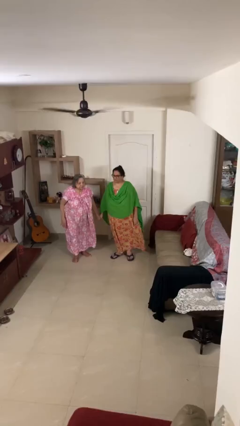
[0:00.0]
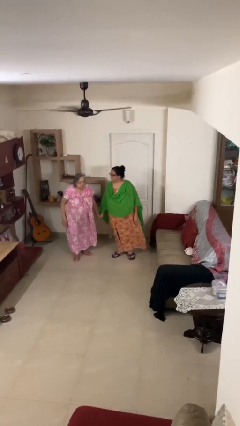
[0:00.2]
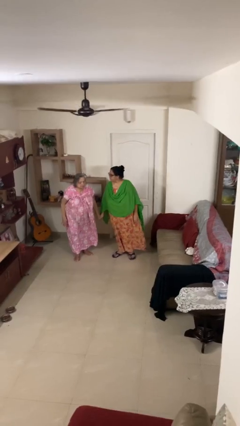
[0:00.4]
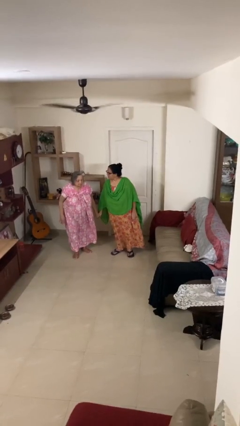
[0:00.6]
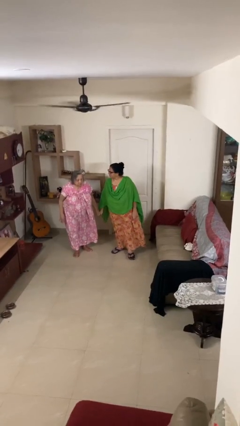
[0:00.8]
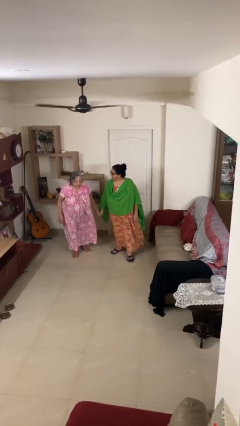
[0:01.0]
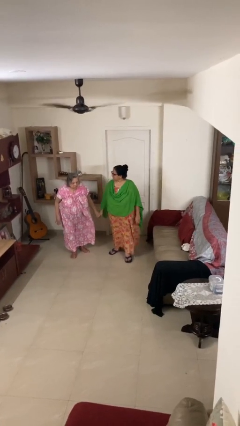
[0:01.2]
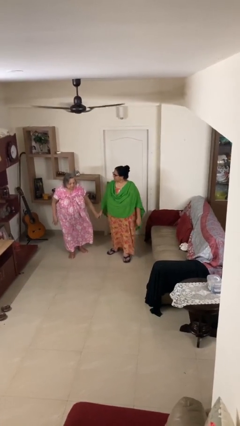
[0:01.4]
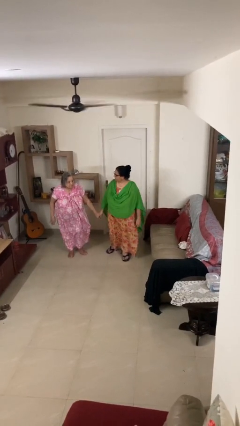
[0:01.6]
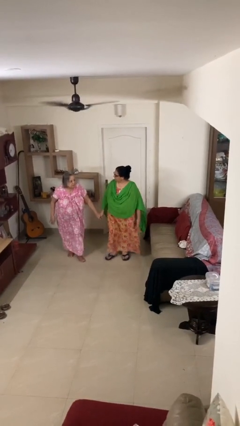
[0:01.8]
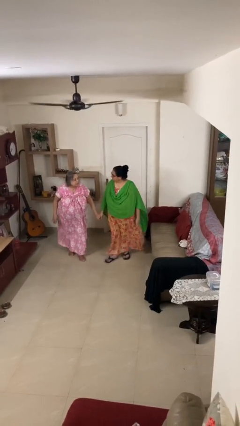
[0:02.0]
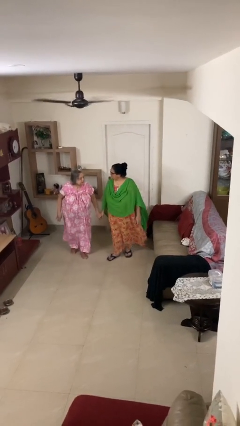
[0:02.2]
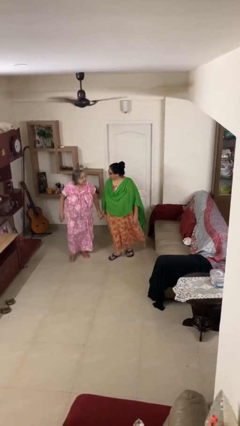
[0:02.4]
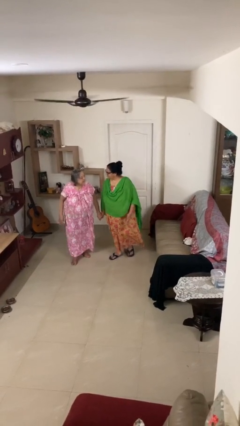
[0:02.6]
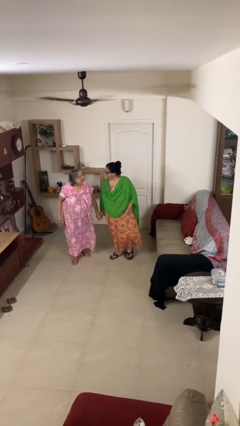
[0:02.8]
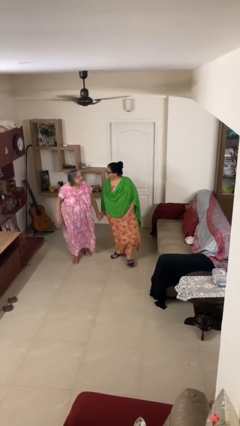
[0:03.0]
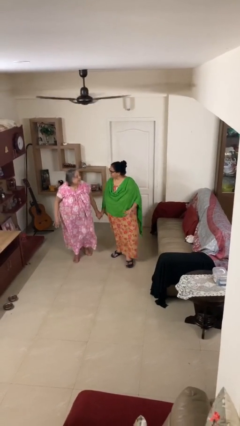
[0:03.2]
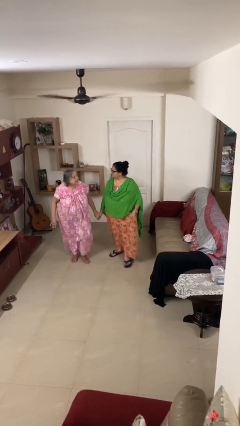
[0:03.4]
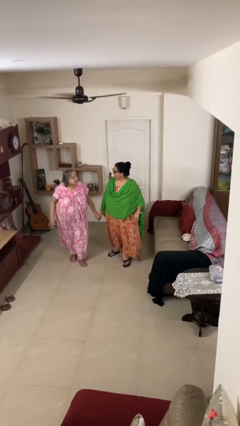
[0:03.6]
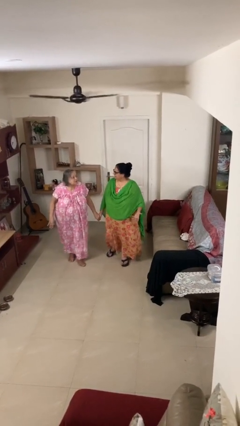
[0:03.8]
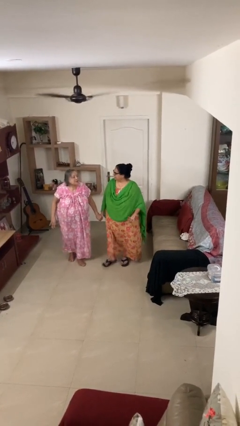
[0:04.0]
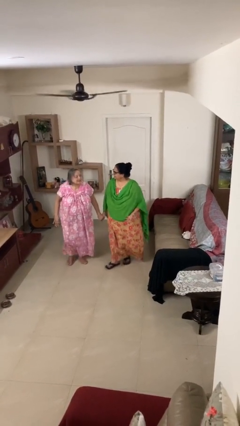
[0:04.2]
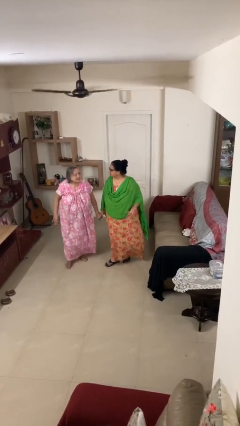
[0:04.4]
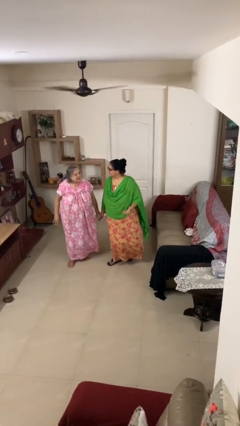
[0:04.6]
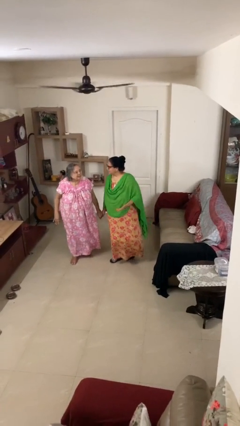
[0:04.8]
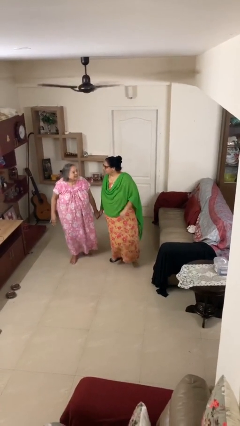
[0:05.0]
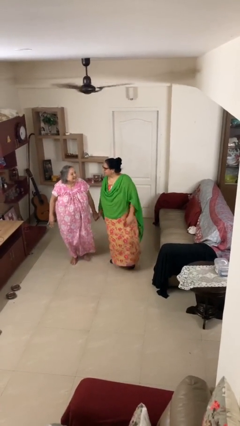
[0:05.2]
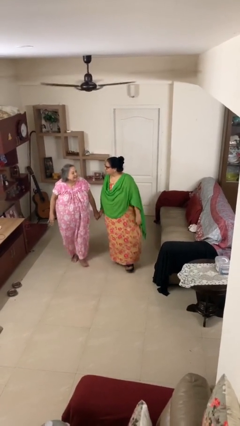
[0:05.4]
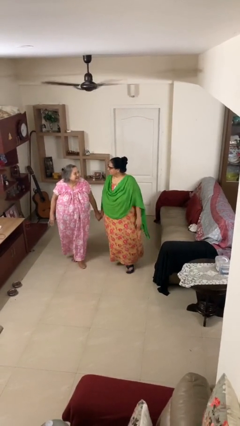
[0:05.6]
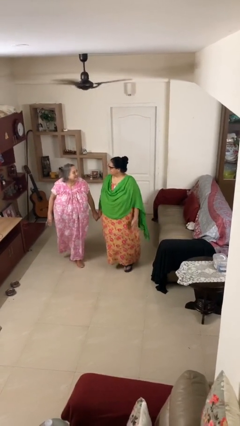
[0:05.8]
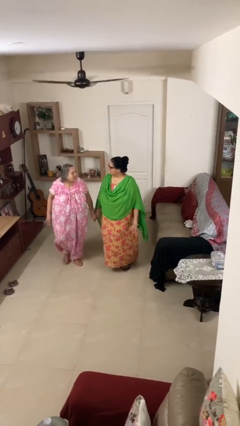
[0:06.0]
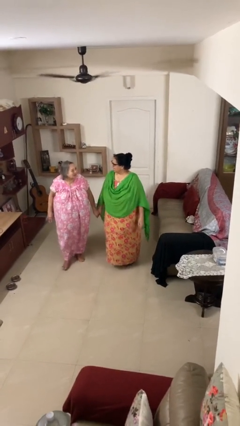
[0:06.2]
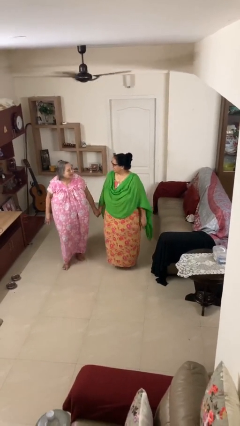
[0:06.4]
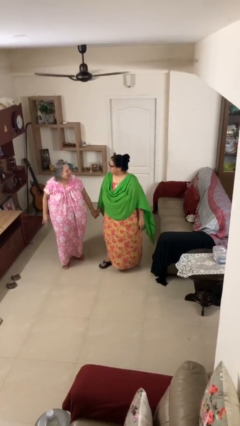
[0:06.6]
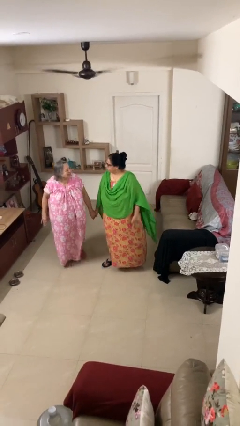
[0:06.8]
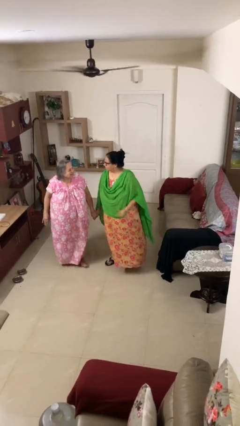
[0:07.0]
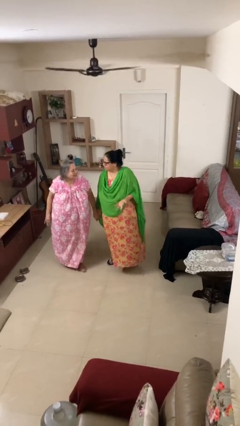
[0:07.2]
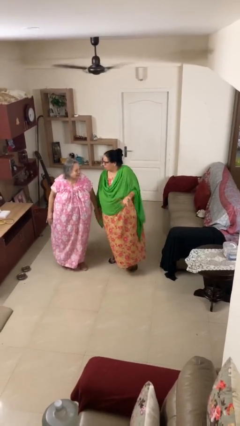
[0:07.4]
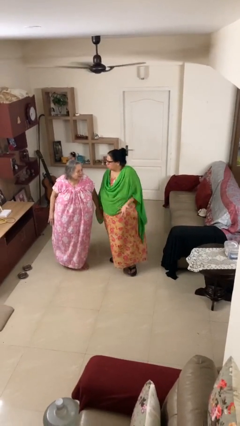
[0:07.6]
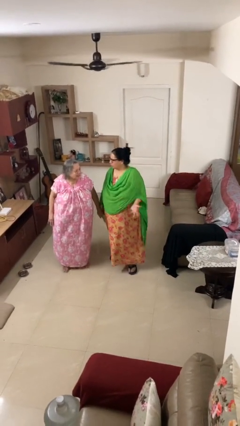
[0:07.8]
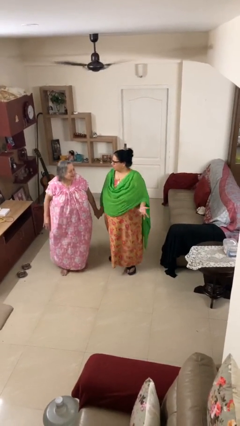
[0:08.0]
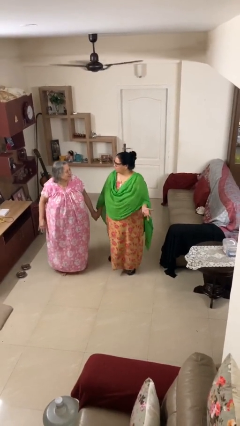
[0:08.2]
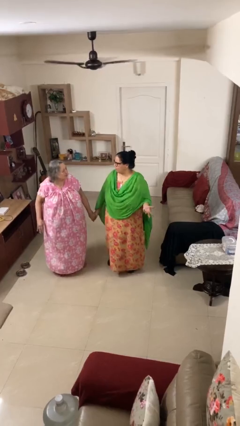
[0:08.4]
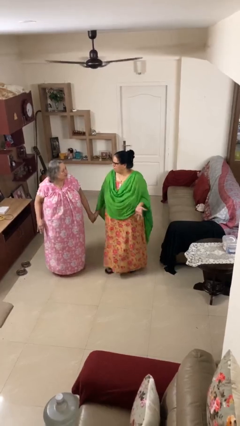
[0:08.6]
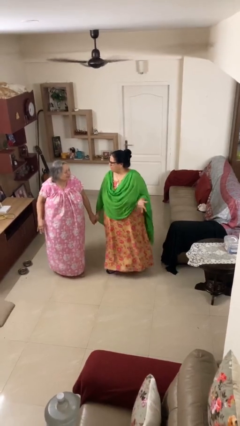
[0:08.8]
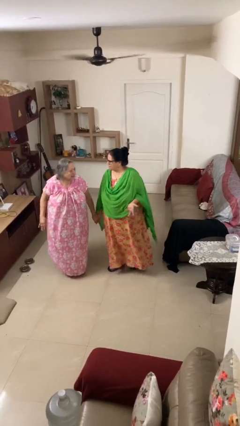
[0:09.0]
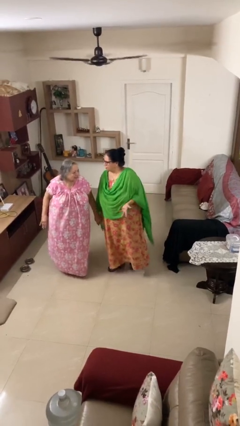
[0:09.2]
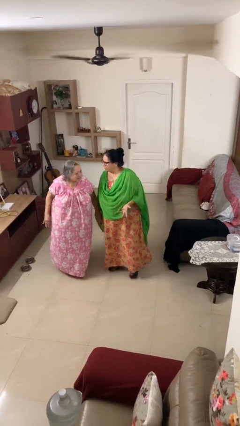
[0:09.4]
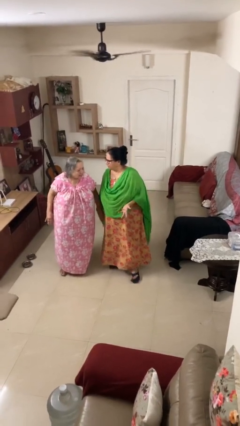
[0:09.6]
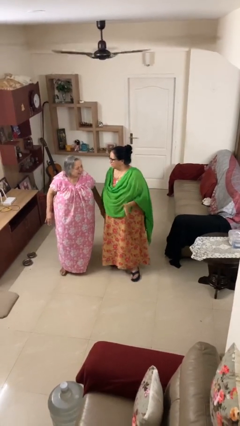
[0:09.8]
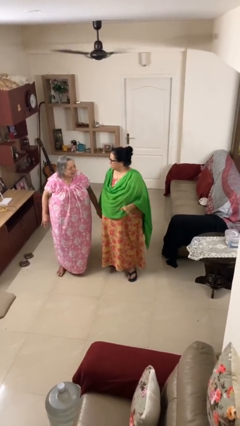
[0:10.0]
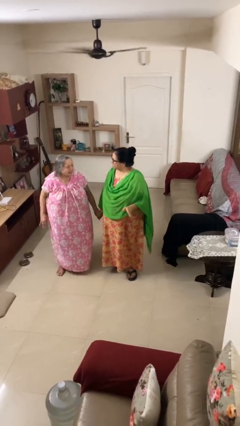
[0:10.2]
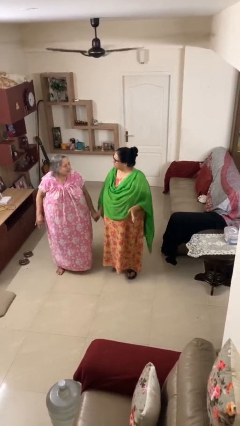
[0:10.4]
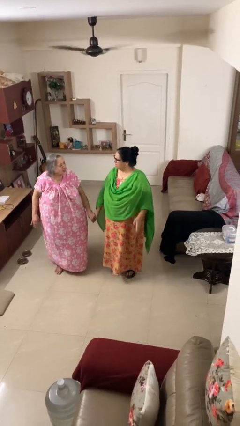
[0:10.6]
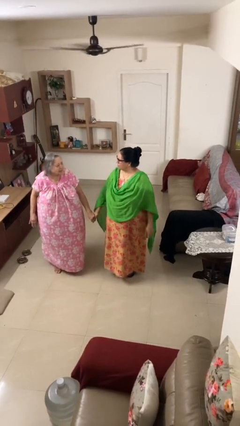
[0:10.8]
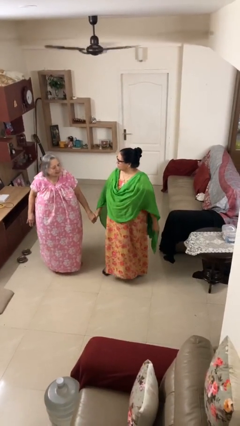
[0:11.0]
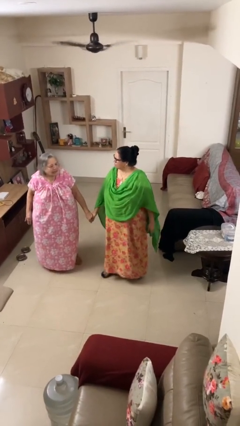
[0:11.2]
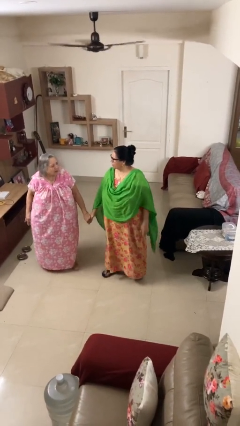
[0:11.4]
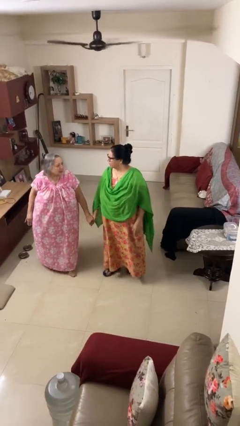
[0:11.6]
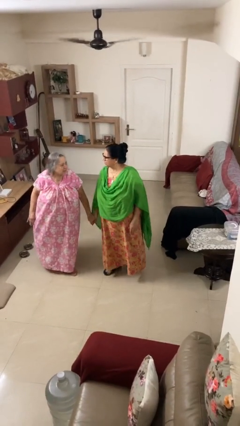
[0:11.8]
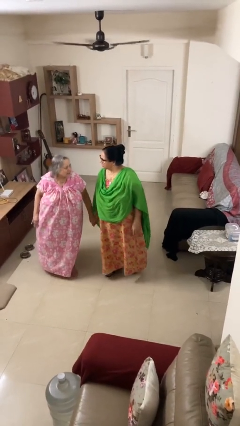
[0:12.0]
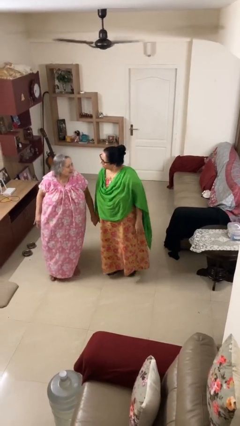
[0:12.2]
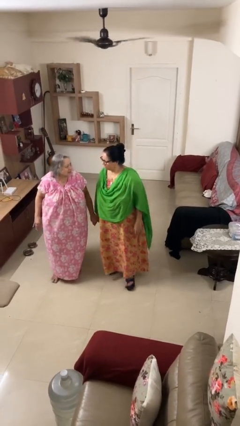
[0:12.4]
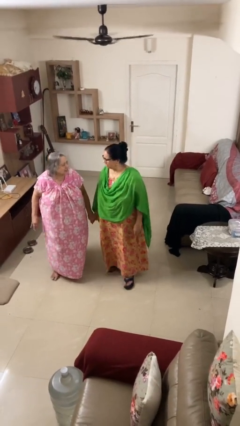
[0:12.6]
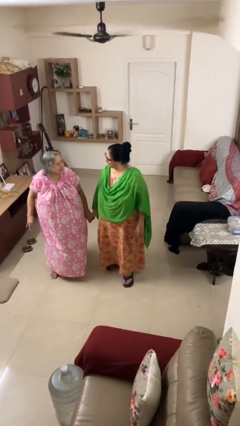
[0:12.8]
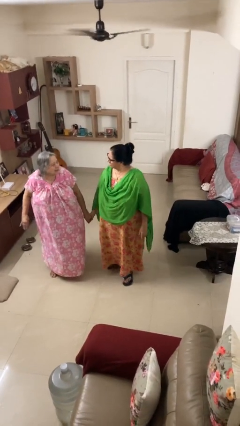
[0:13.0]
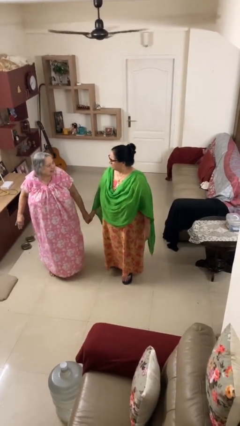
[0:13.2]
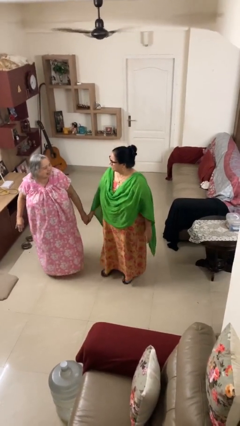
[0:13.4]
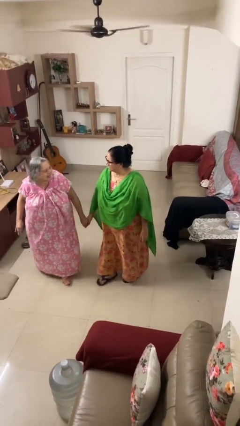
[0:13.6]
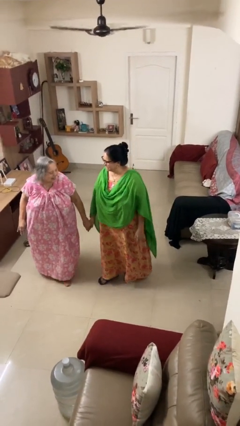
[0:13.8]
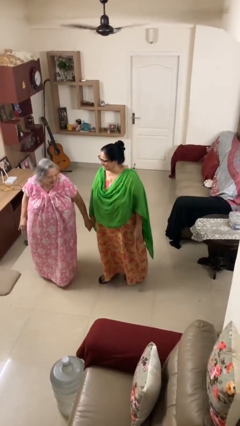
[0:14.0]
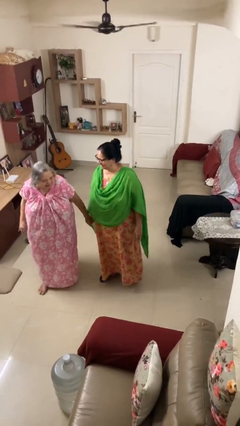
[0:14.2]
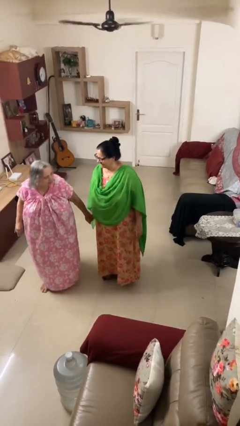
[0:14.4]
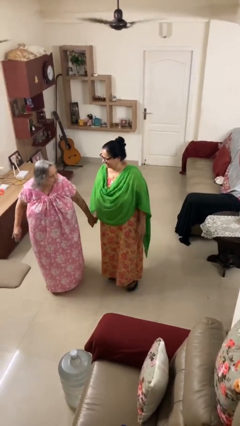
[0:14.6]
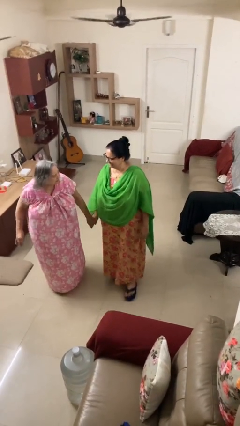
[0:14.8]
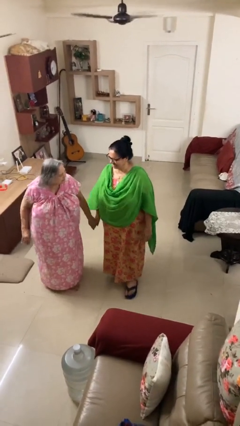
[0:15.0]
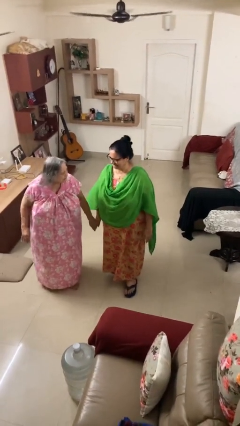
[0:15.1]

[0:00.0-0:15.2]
person holds hand

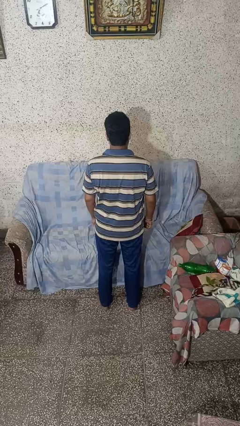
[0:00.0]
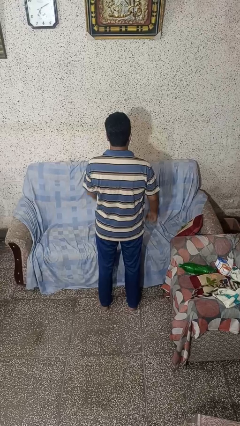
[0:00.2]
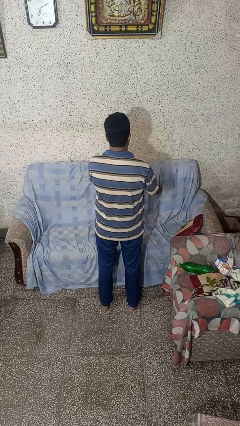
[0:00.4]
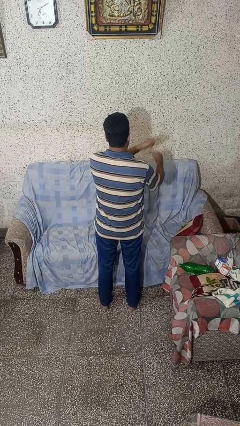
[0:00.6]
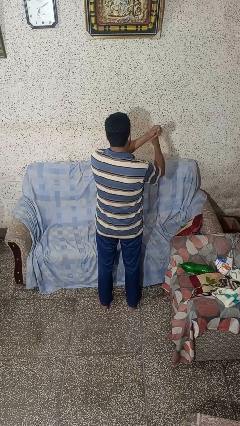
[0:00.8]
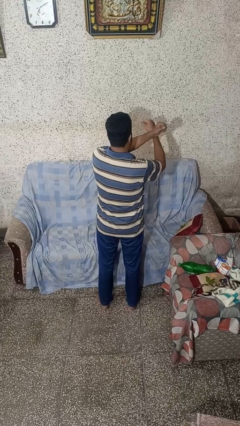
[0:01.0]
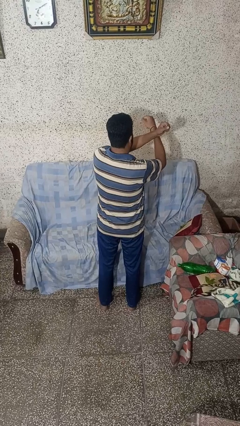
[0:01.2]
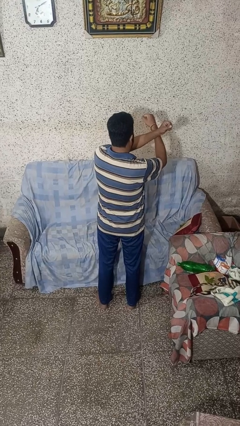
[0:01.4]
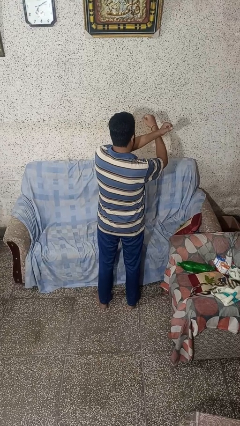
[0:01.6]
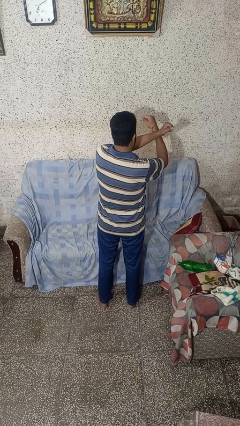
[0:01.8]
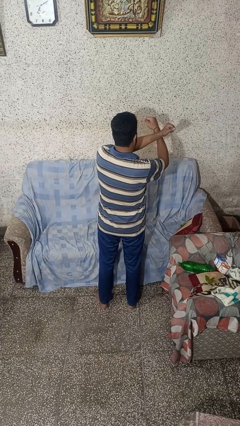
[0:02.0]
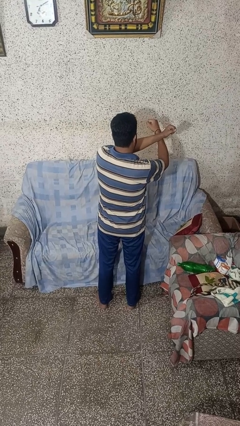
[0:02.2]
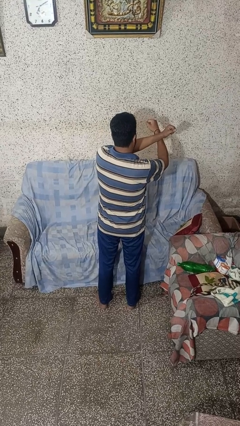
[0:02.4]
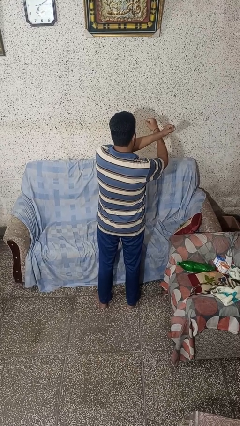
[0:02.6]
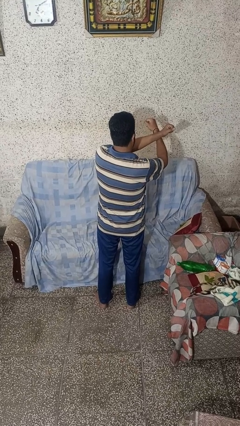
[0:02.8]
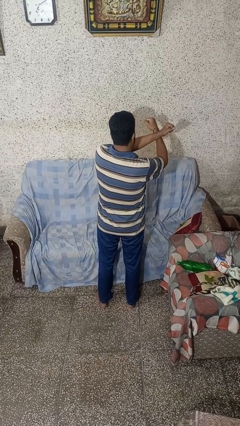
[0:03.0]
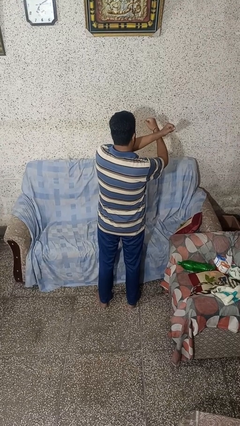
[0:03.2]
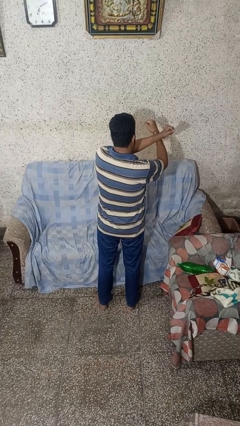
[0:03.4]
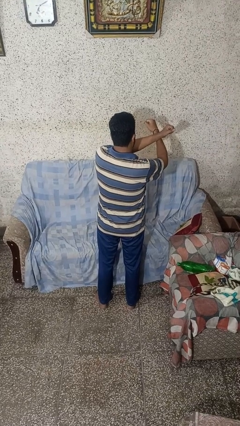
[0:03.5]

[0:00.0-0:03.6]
person gestures arms x
